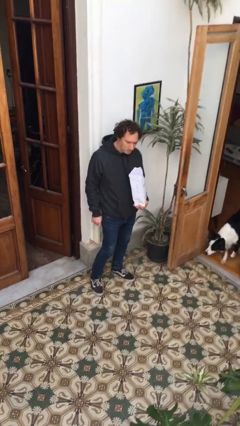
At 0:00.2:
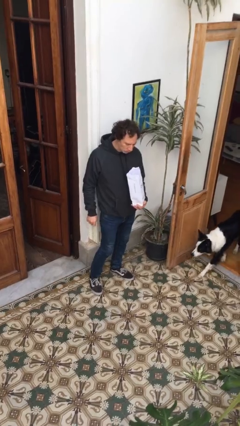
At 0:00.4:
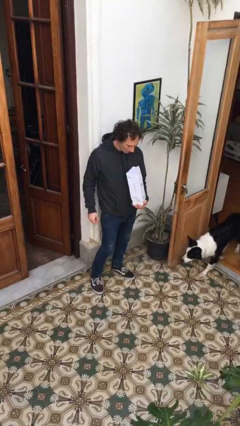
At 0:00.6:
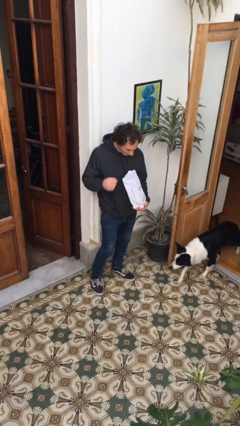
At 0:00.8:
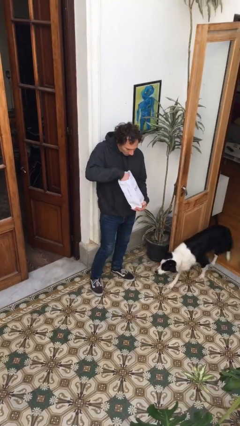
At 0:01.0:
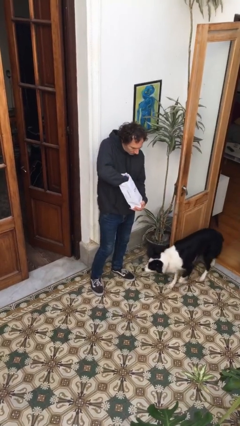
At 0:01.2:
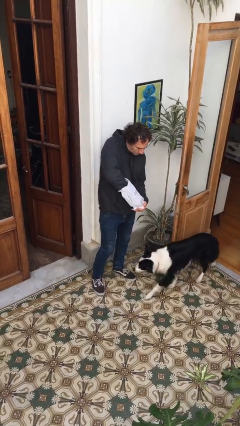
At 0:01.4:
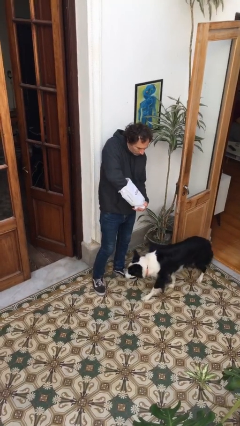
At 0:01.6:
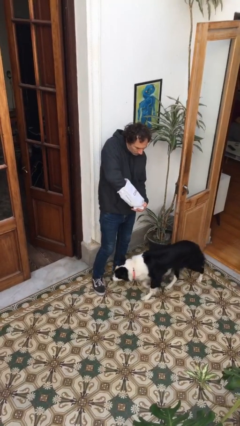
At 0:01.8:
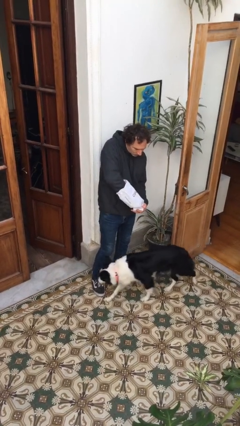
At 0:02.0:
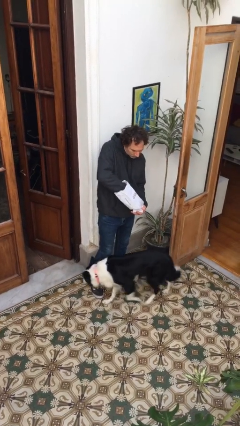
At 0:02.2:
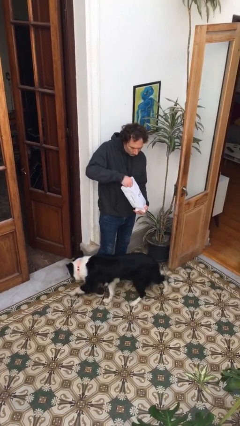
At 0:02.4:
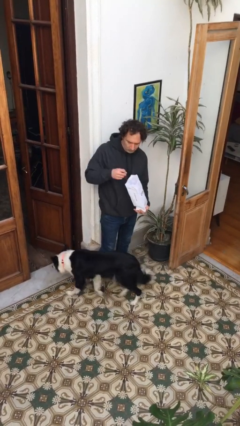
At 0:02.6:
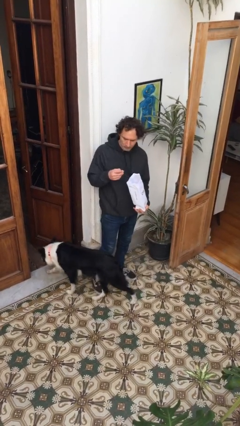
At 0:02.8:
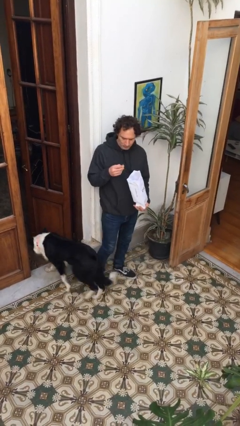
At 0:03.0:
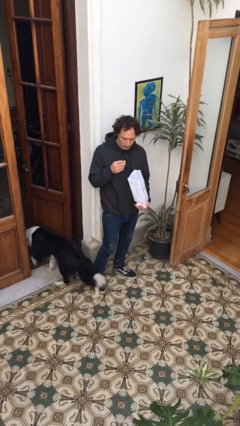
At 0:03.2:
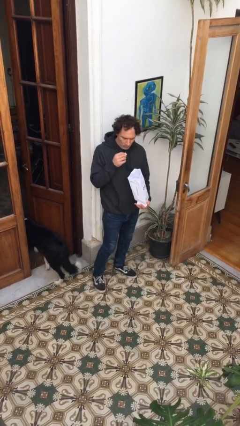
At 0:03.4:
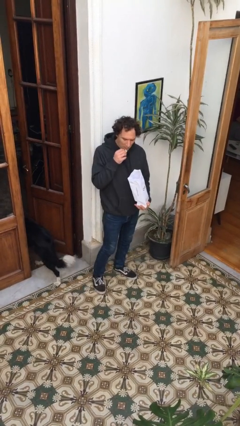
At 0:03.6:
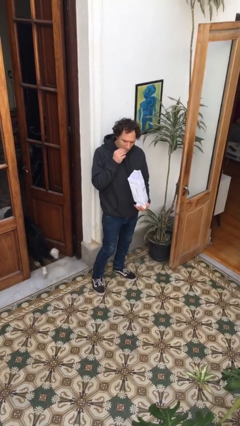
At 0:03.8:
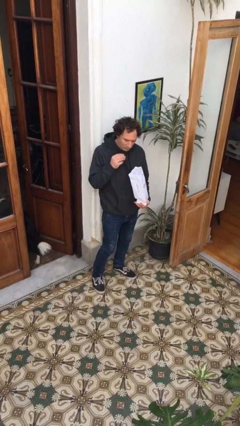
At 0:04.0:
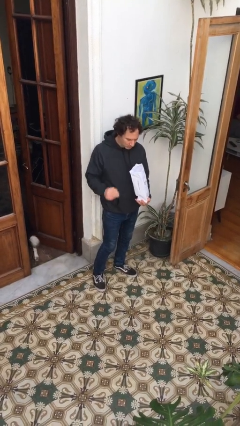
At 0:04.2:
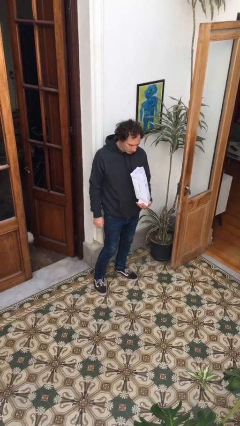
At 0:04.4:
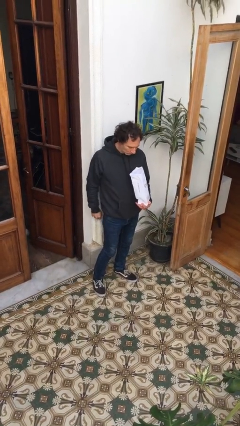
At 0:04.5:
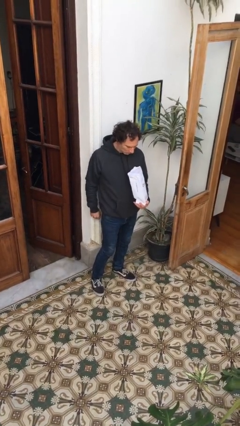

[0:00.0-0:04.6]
person eats snack from bag

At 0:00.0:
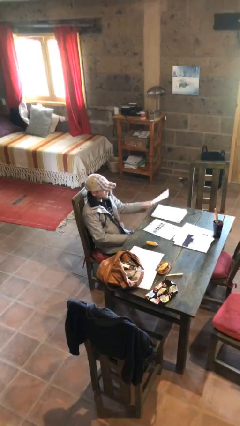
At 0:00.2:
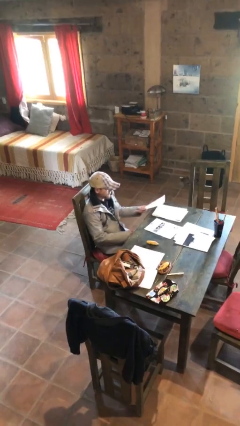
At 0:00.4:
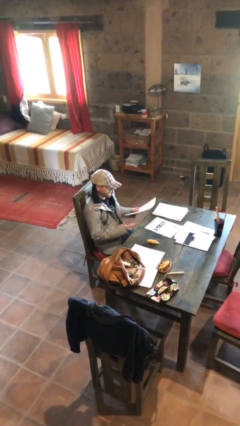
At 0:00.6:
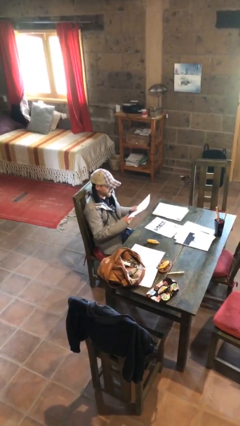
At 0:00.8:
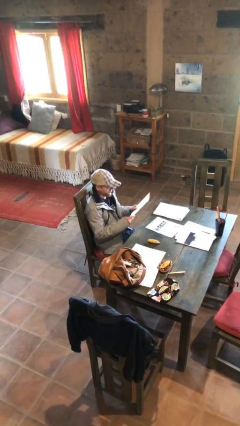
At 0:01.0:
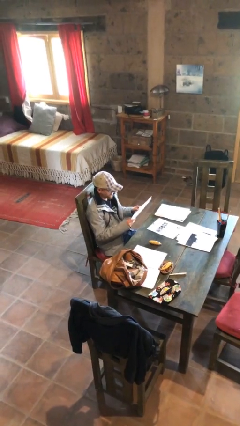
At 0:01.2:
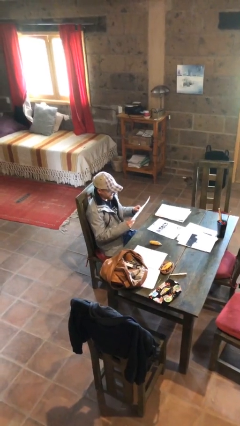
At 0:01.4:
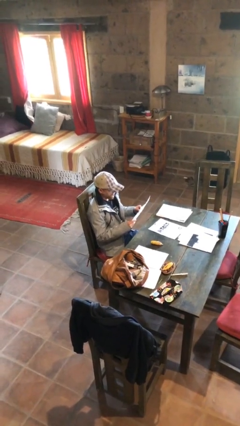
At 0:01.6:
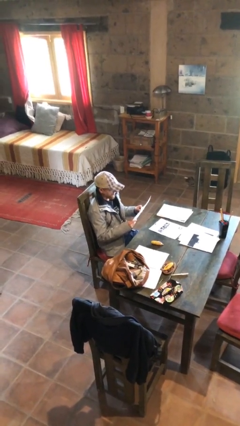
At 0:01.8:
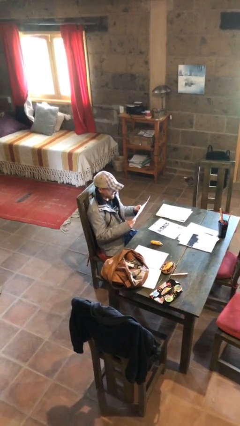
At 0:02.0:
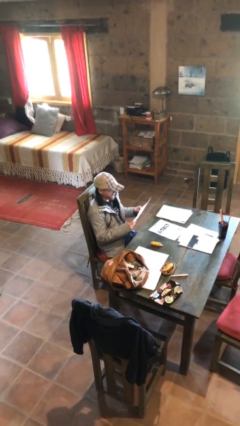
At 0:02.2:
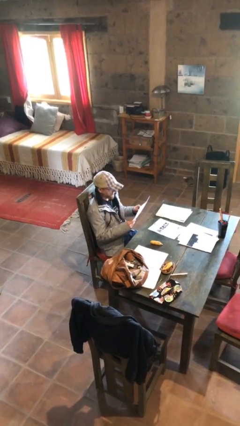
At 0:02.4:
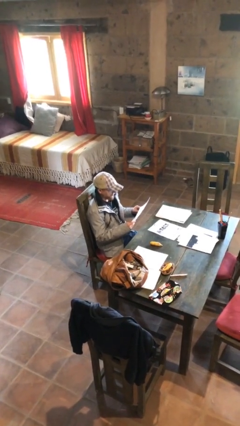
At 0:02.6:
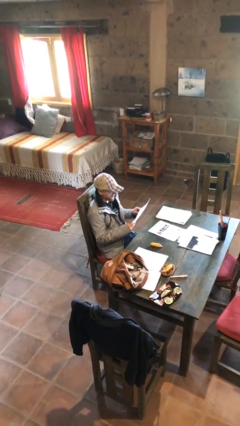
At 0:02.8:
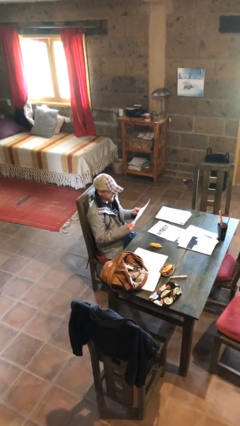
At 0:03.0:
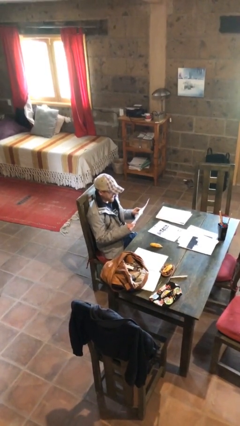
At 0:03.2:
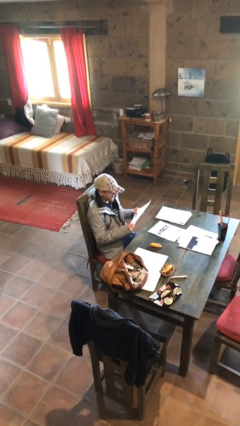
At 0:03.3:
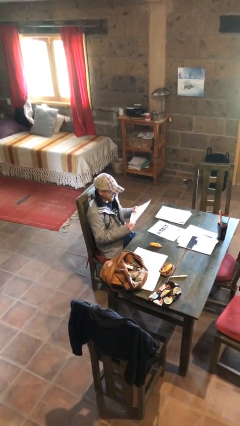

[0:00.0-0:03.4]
person reads document

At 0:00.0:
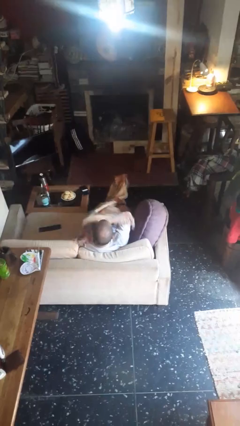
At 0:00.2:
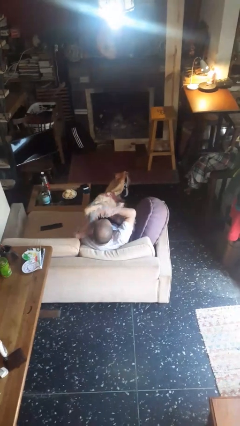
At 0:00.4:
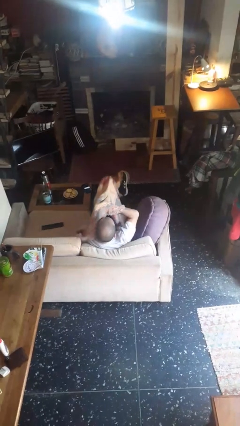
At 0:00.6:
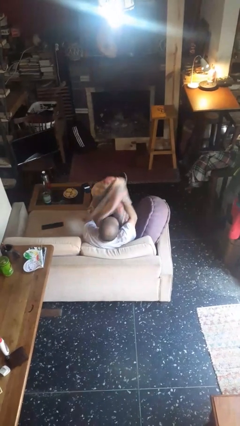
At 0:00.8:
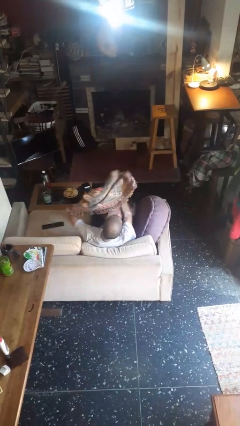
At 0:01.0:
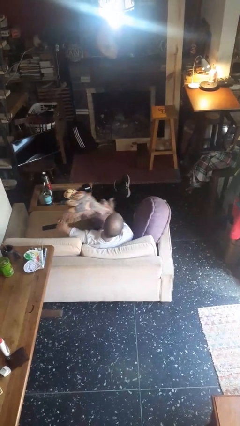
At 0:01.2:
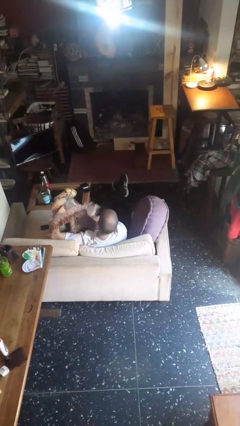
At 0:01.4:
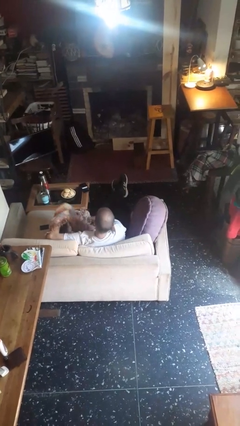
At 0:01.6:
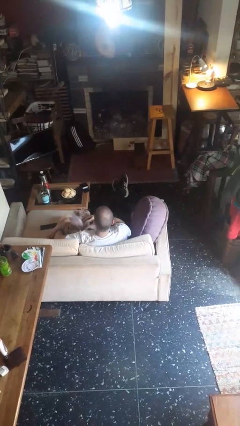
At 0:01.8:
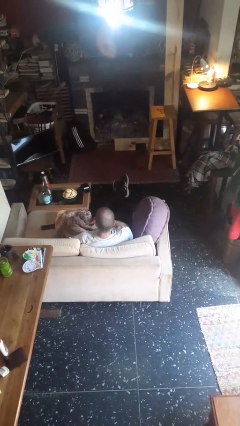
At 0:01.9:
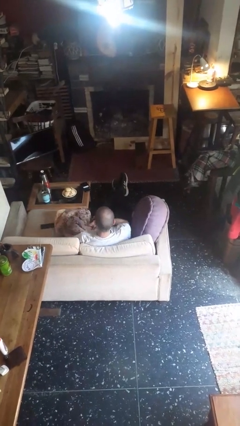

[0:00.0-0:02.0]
person uncovers with blanket

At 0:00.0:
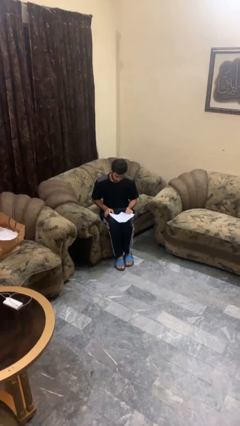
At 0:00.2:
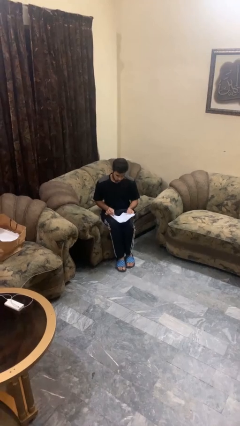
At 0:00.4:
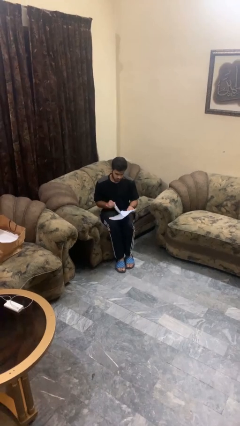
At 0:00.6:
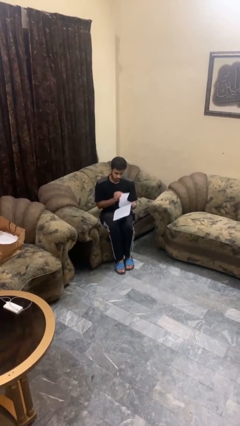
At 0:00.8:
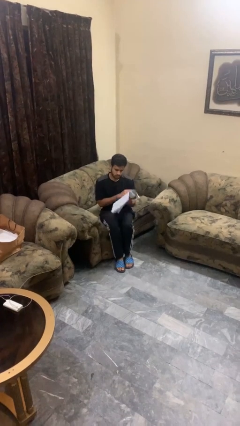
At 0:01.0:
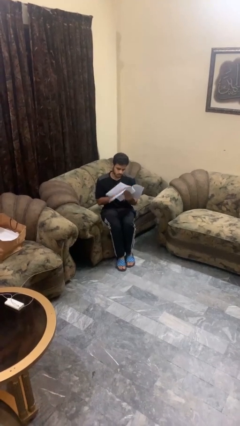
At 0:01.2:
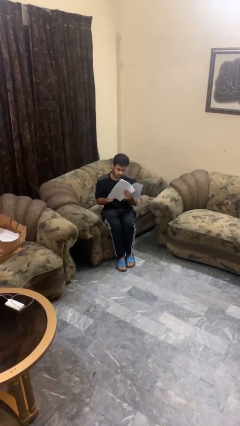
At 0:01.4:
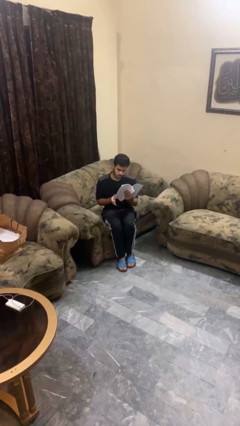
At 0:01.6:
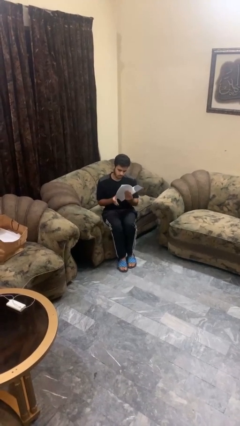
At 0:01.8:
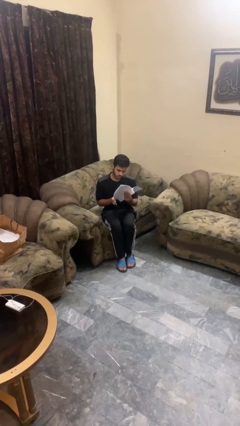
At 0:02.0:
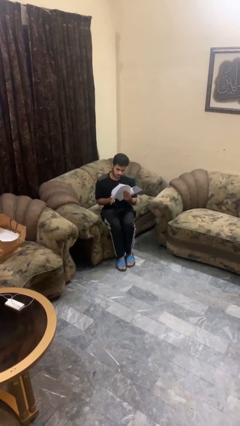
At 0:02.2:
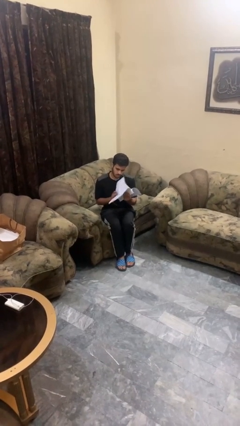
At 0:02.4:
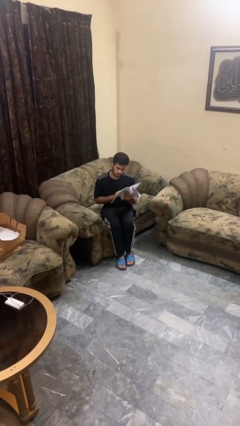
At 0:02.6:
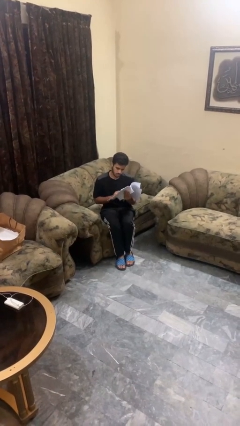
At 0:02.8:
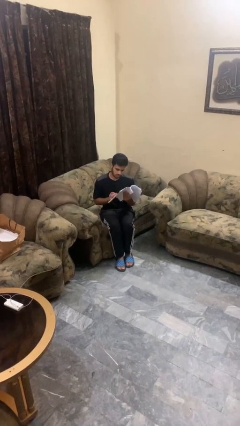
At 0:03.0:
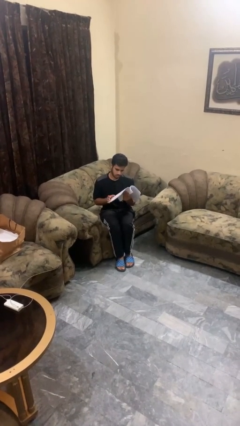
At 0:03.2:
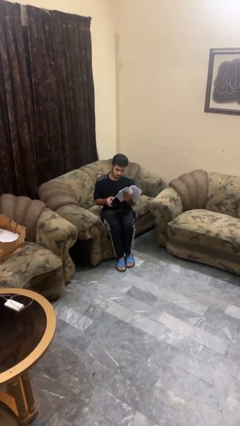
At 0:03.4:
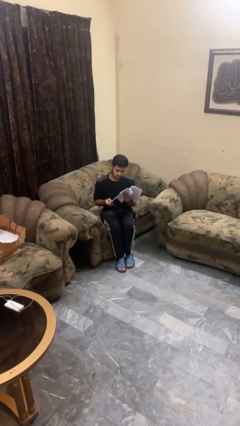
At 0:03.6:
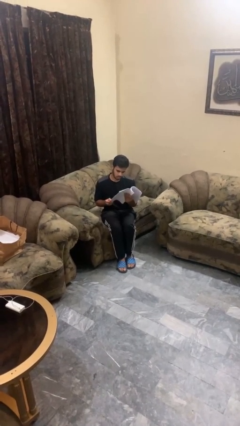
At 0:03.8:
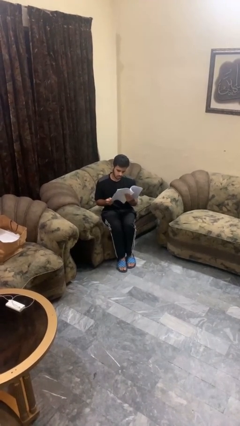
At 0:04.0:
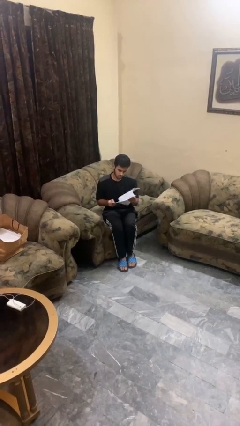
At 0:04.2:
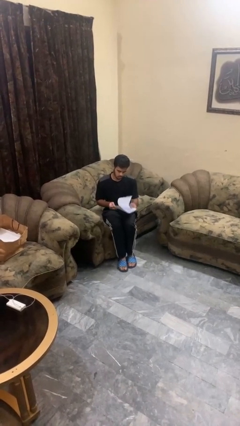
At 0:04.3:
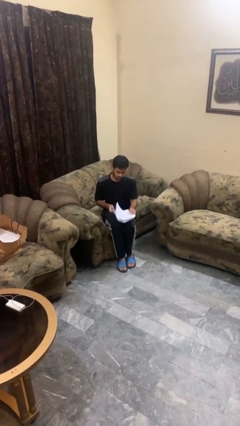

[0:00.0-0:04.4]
person reads magazine

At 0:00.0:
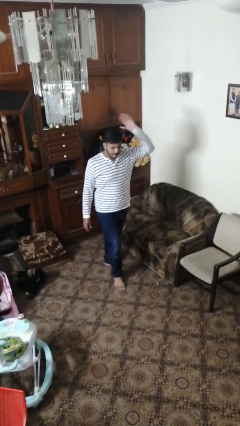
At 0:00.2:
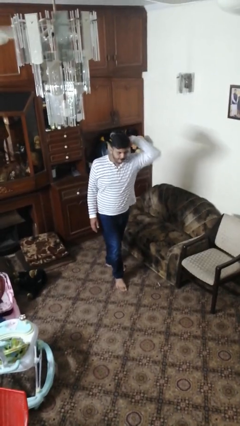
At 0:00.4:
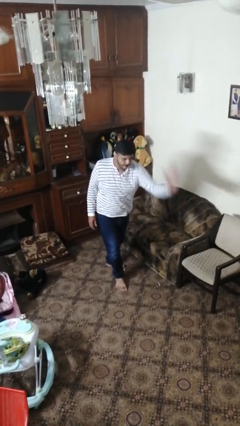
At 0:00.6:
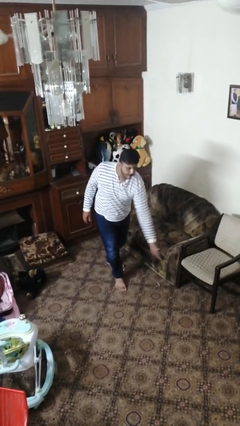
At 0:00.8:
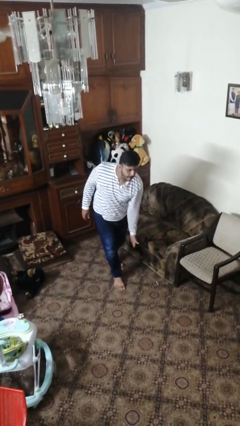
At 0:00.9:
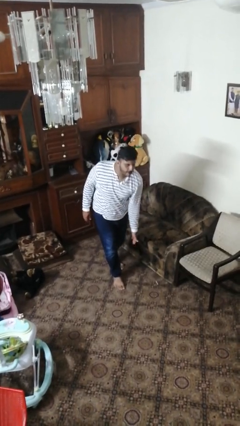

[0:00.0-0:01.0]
person karate chop

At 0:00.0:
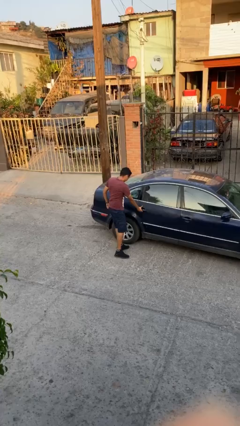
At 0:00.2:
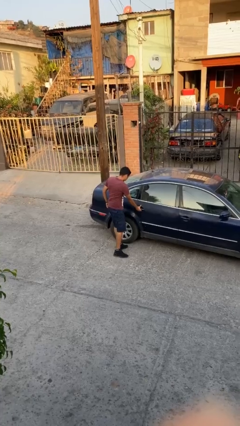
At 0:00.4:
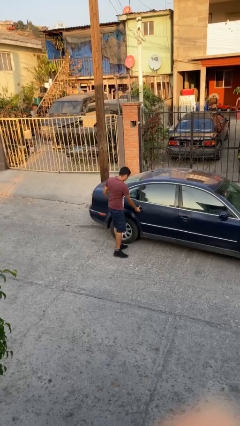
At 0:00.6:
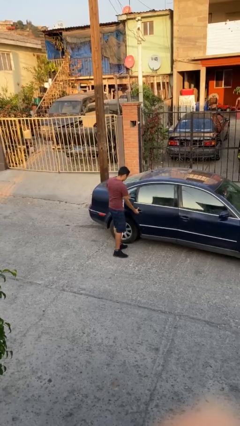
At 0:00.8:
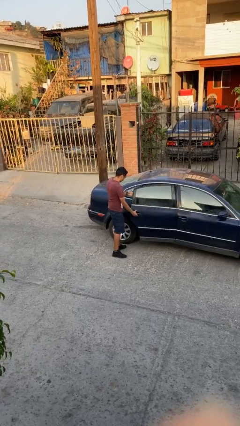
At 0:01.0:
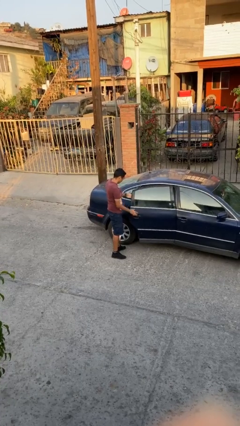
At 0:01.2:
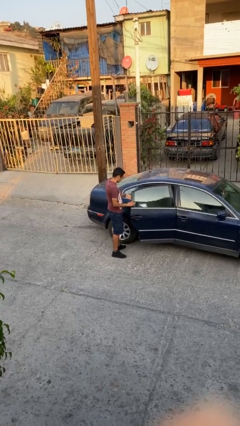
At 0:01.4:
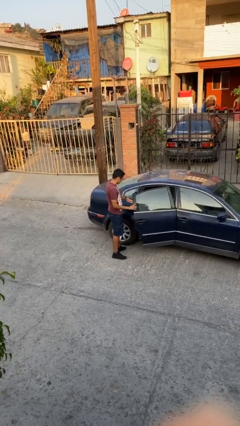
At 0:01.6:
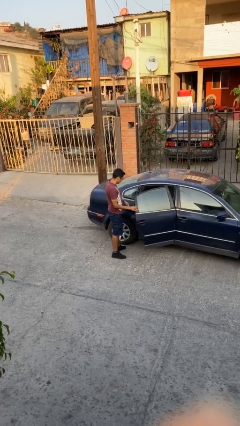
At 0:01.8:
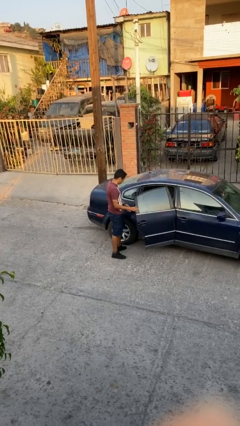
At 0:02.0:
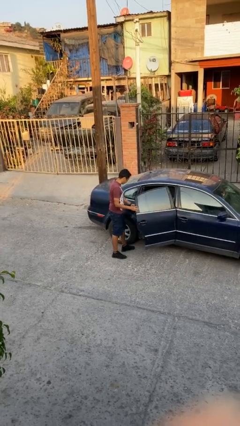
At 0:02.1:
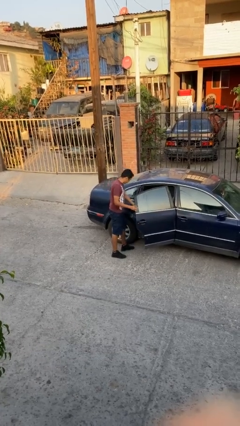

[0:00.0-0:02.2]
person opens car door
